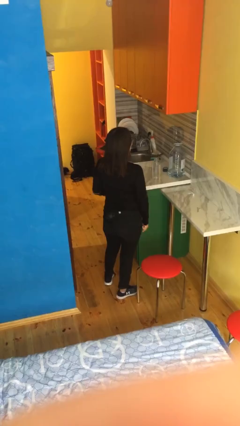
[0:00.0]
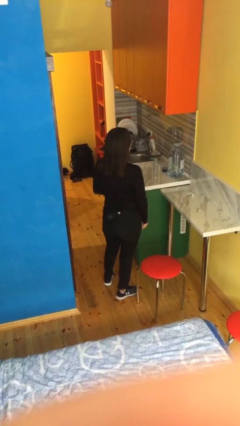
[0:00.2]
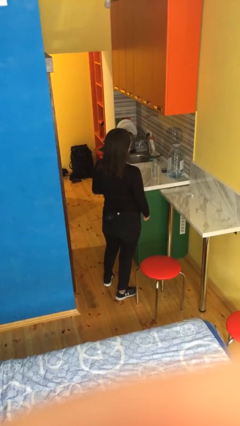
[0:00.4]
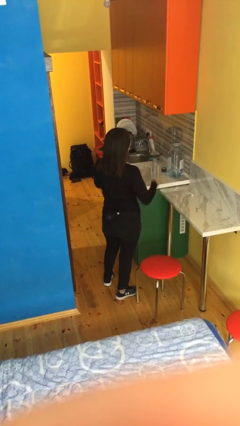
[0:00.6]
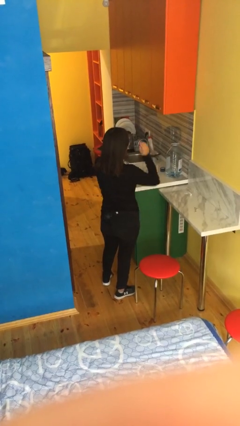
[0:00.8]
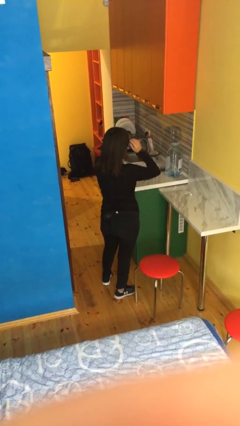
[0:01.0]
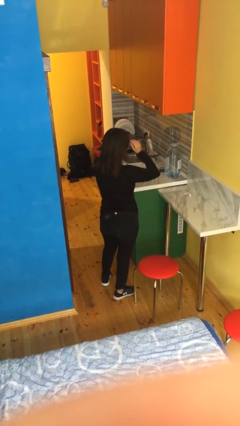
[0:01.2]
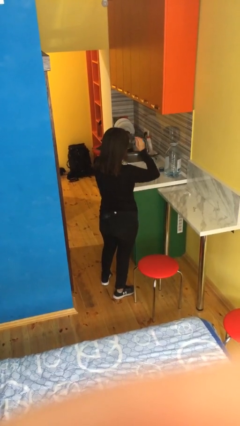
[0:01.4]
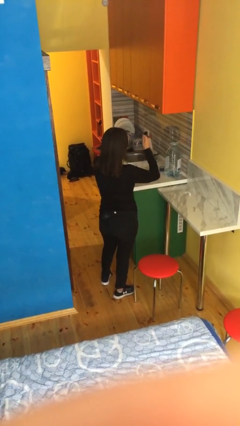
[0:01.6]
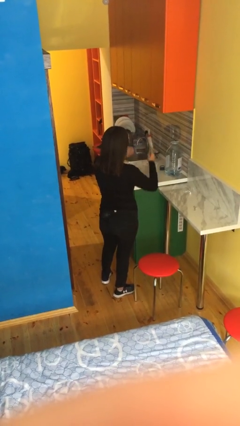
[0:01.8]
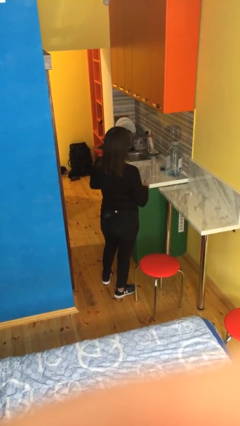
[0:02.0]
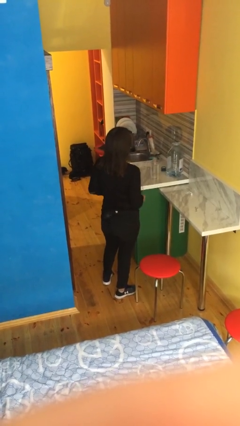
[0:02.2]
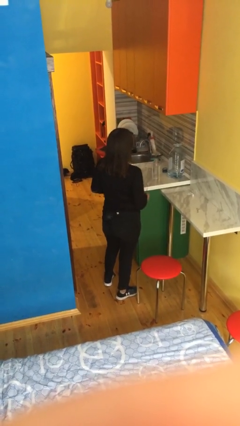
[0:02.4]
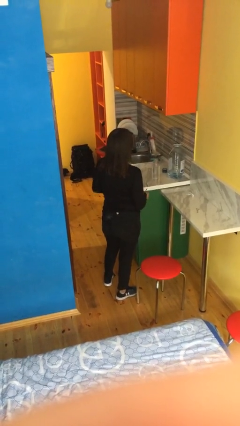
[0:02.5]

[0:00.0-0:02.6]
person takes off glasses

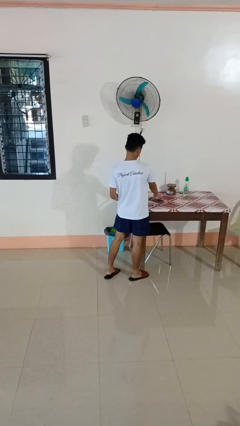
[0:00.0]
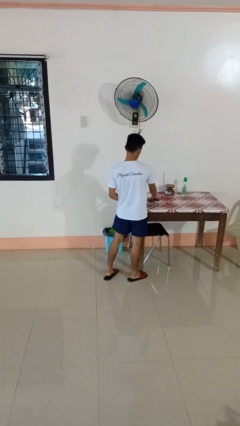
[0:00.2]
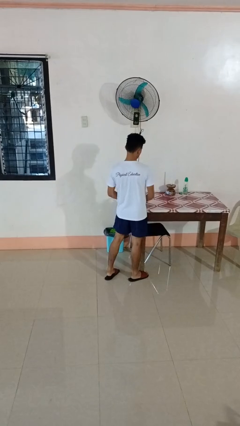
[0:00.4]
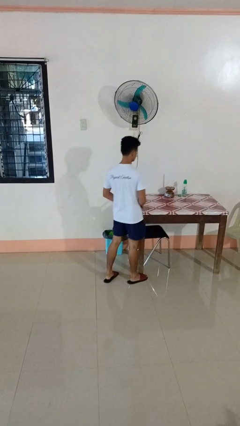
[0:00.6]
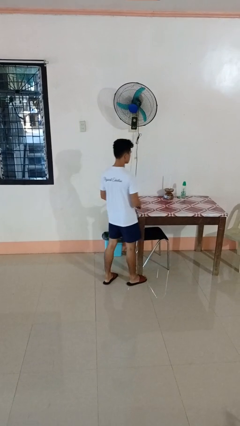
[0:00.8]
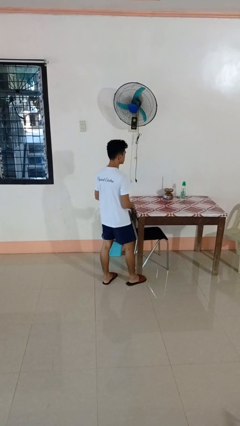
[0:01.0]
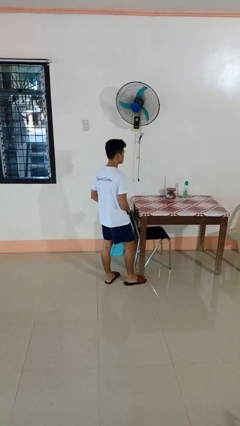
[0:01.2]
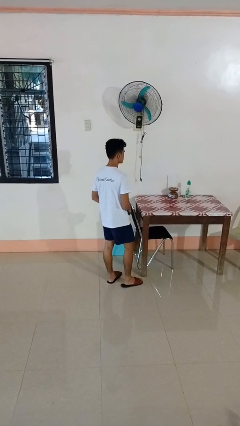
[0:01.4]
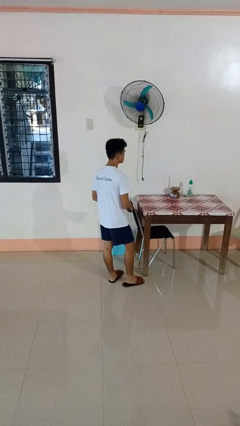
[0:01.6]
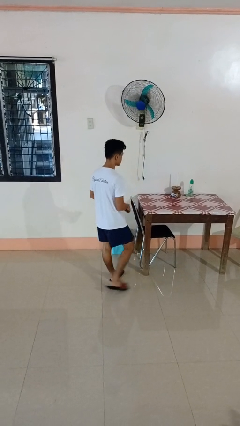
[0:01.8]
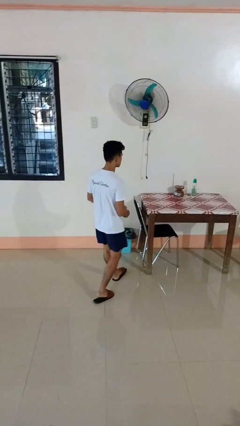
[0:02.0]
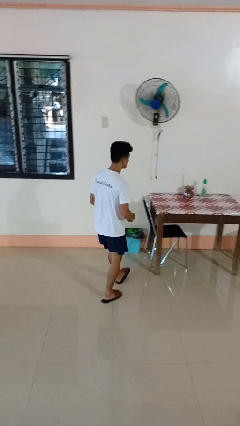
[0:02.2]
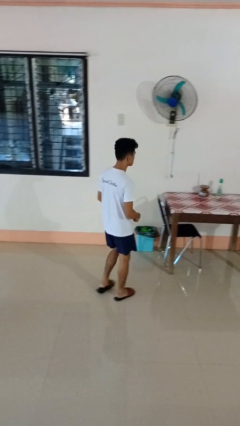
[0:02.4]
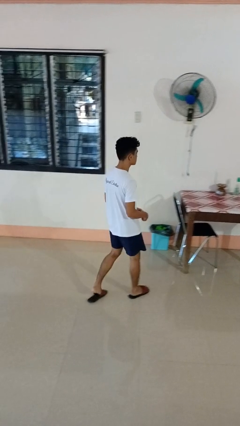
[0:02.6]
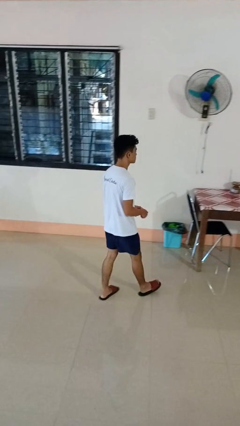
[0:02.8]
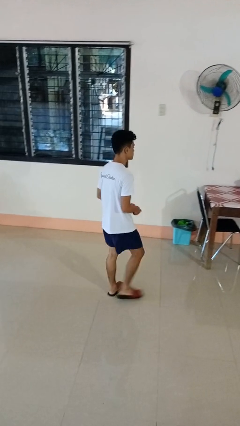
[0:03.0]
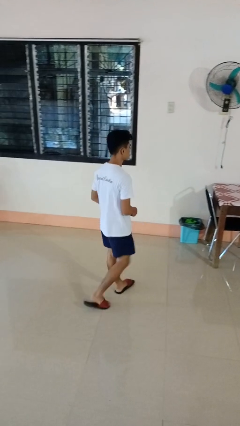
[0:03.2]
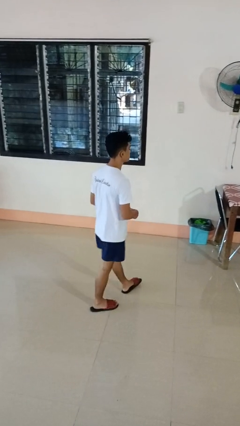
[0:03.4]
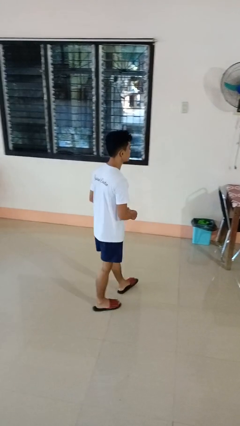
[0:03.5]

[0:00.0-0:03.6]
person picks up object from table

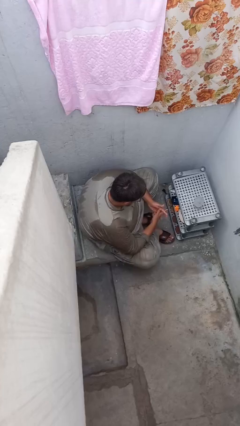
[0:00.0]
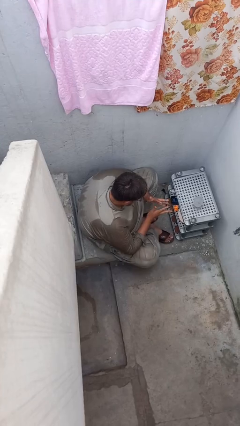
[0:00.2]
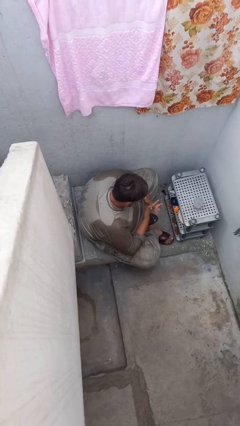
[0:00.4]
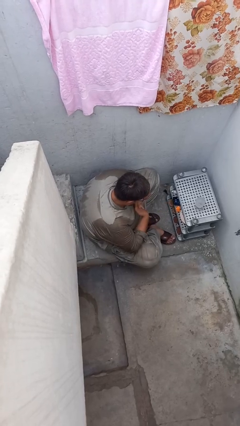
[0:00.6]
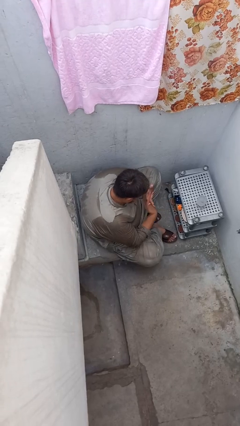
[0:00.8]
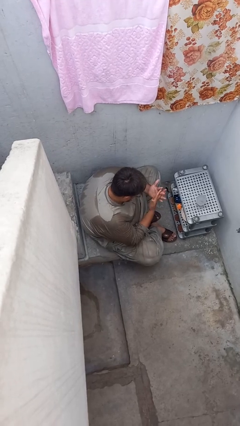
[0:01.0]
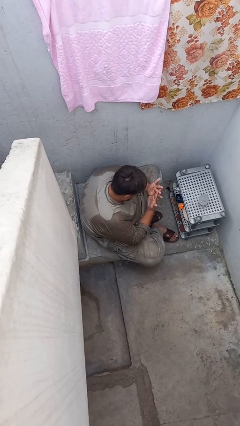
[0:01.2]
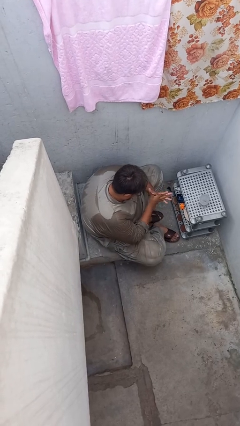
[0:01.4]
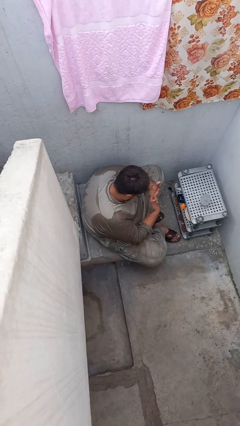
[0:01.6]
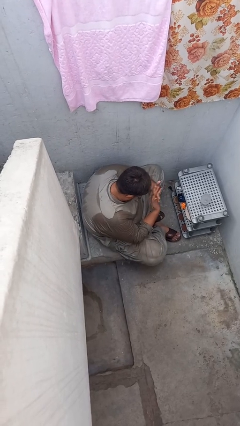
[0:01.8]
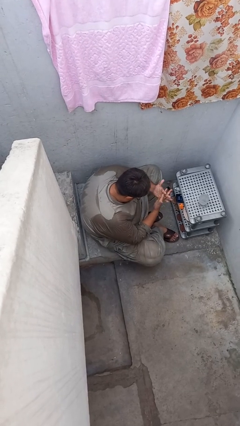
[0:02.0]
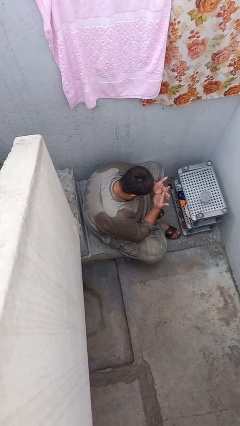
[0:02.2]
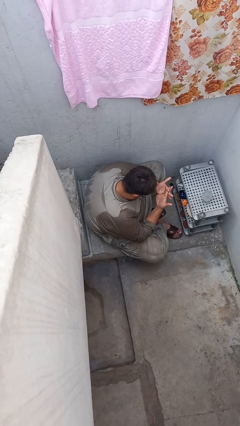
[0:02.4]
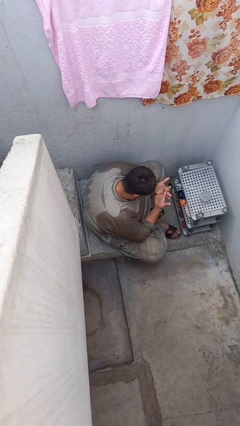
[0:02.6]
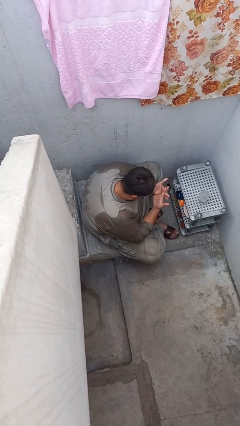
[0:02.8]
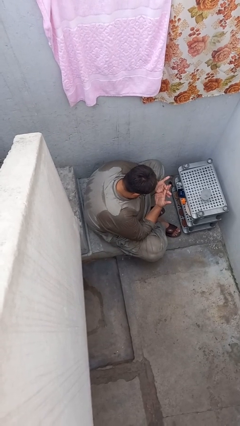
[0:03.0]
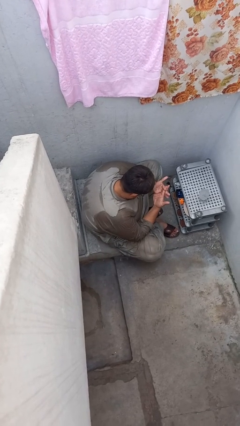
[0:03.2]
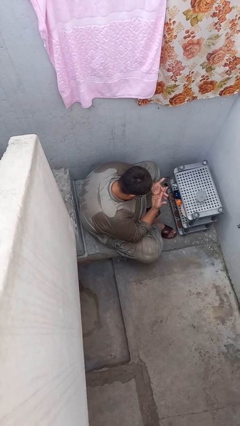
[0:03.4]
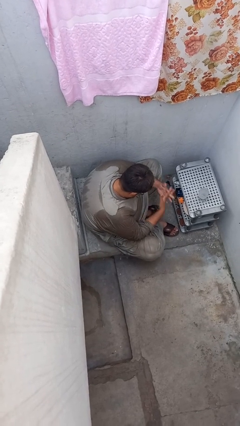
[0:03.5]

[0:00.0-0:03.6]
person snaps fingers

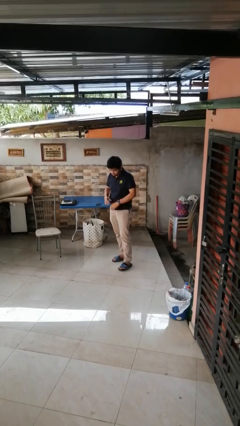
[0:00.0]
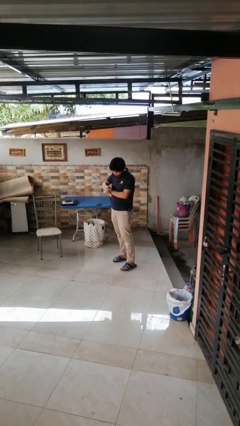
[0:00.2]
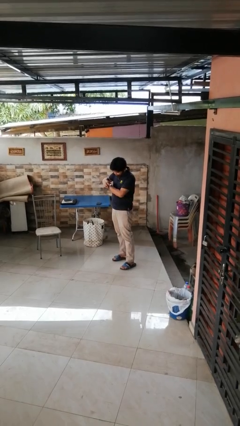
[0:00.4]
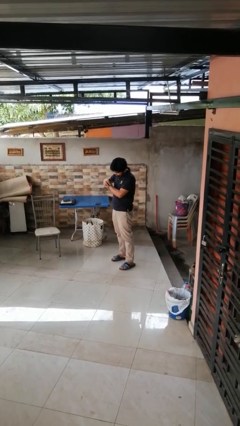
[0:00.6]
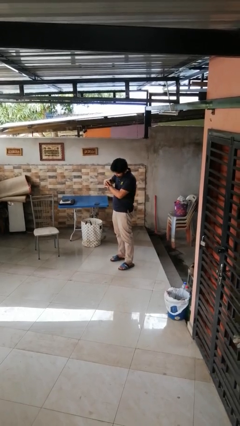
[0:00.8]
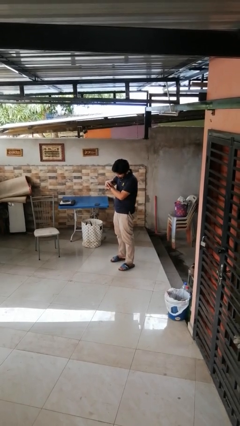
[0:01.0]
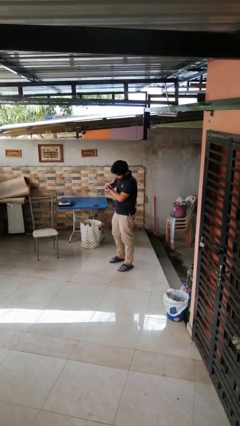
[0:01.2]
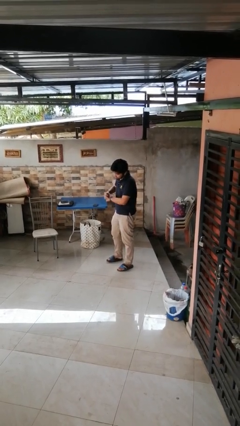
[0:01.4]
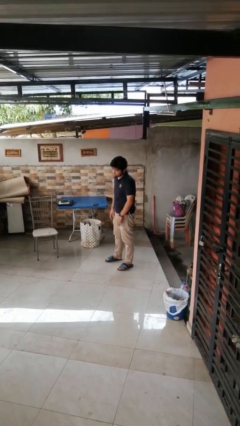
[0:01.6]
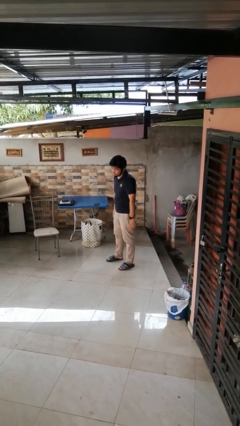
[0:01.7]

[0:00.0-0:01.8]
person looks at wristwatch

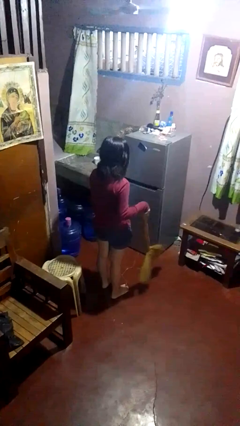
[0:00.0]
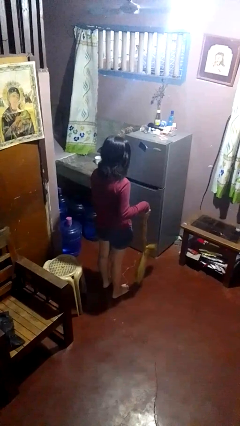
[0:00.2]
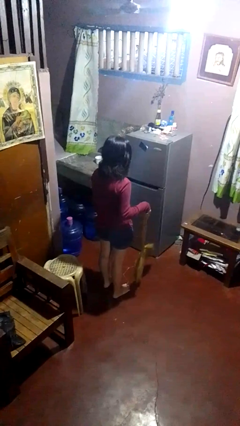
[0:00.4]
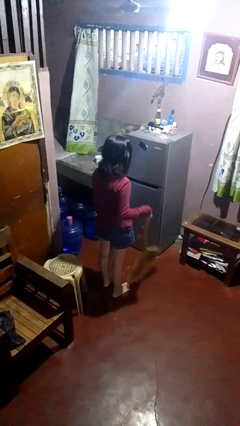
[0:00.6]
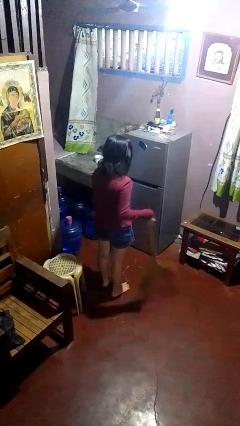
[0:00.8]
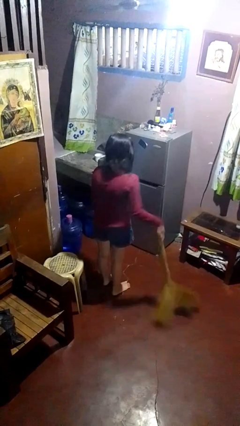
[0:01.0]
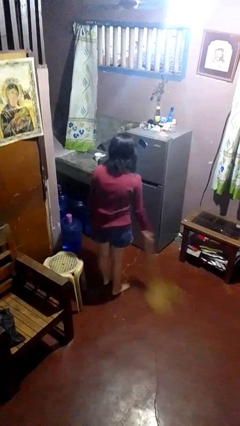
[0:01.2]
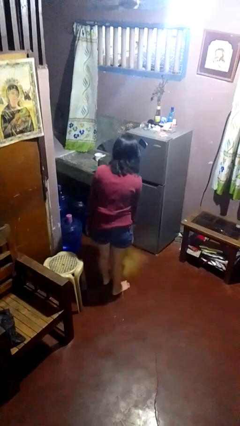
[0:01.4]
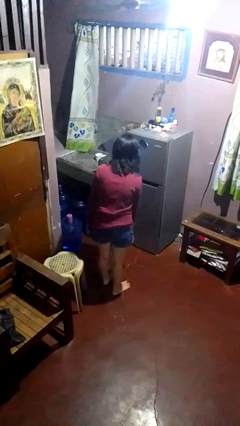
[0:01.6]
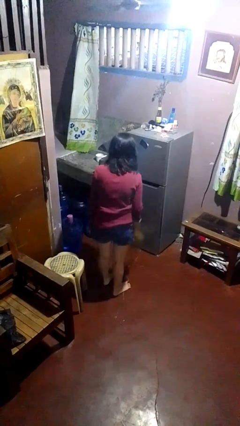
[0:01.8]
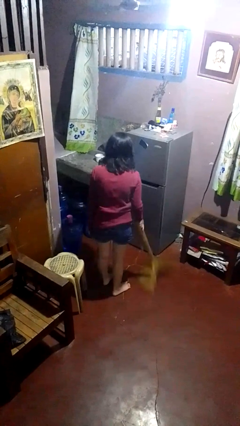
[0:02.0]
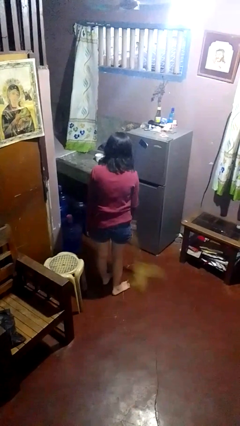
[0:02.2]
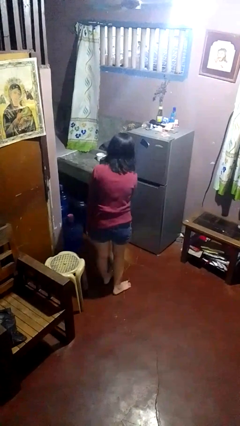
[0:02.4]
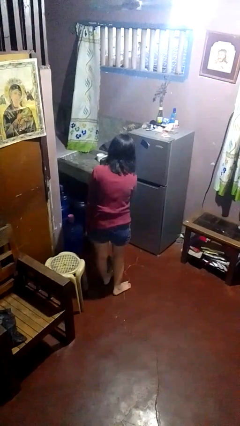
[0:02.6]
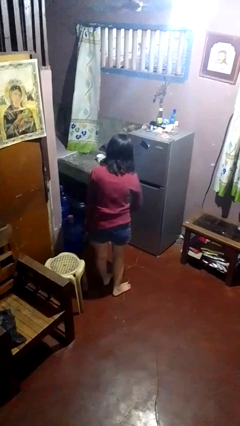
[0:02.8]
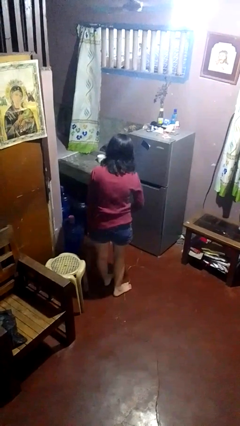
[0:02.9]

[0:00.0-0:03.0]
person sweeps floor

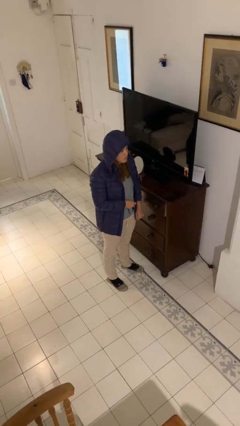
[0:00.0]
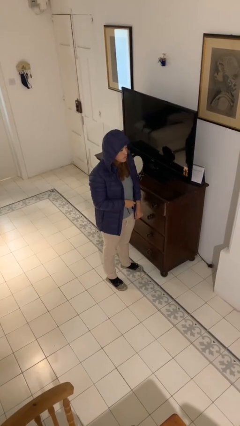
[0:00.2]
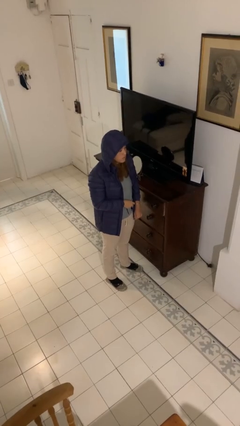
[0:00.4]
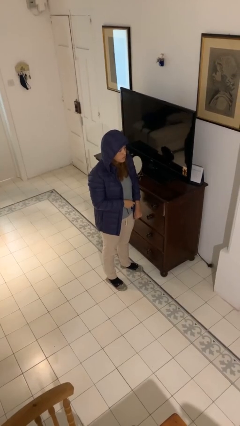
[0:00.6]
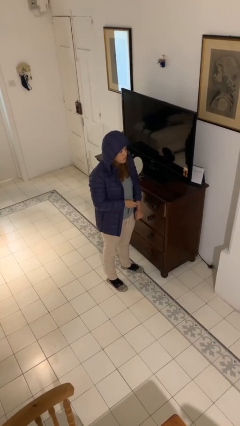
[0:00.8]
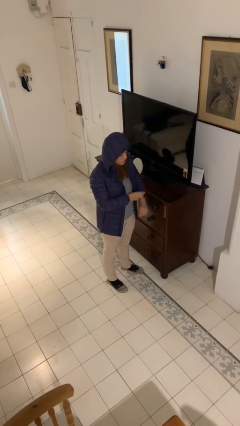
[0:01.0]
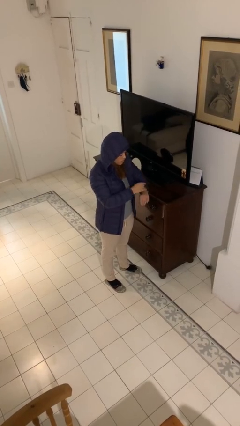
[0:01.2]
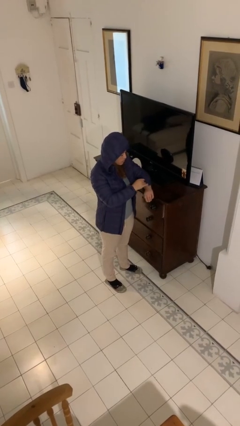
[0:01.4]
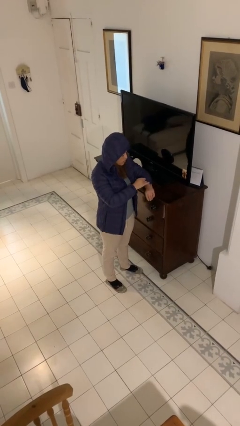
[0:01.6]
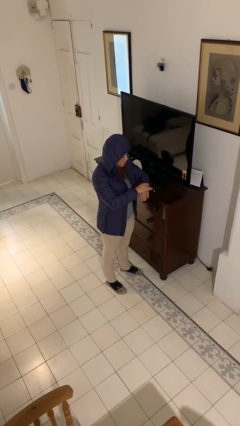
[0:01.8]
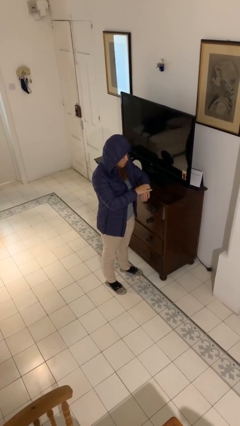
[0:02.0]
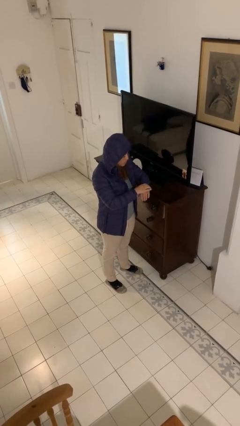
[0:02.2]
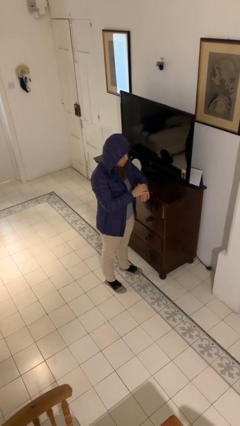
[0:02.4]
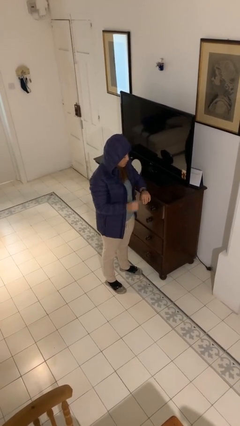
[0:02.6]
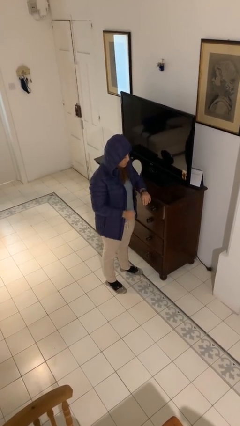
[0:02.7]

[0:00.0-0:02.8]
person puts on wristwatch
